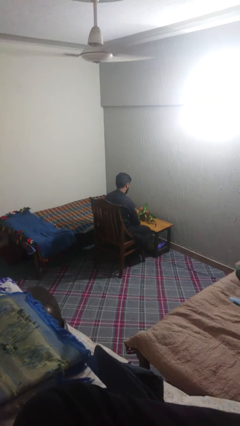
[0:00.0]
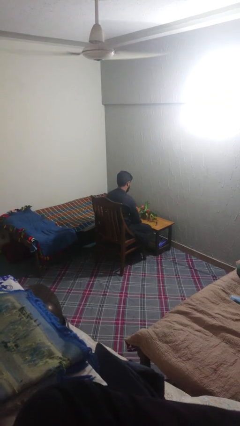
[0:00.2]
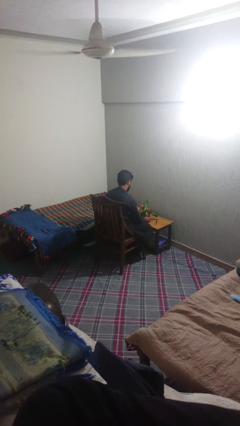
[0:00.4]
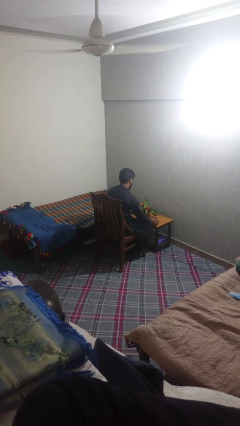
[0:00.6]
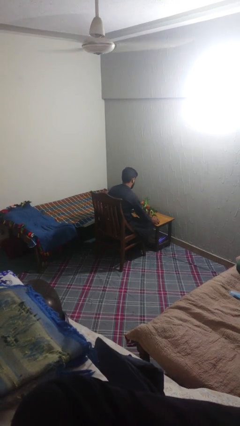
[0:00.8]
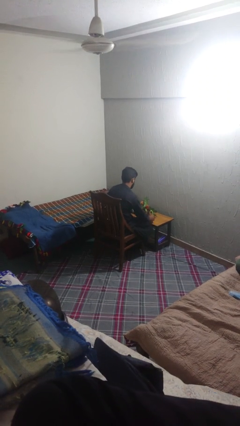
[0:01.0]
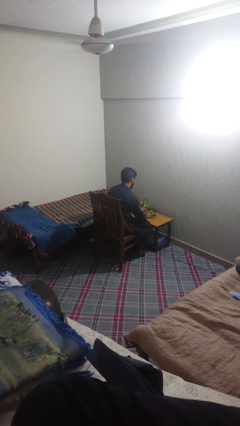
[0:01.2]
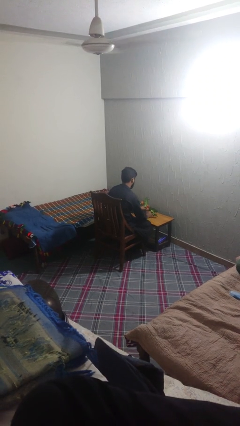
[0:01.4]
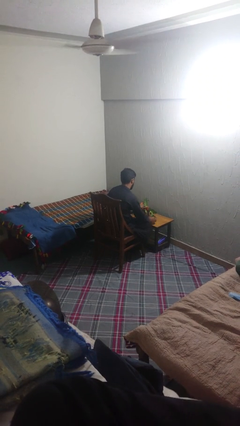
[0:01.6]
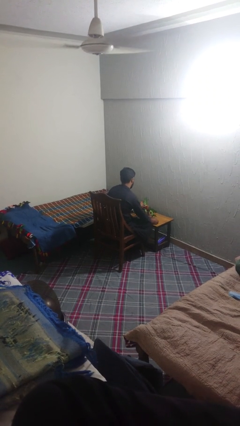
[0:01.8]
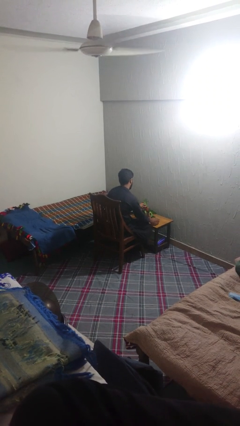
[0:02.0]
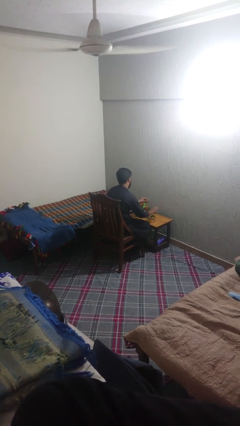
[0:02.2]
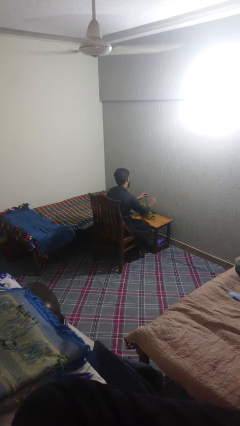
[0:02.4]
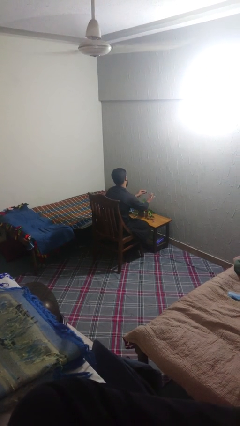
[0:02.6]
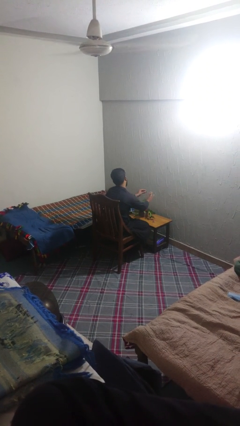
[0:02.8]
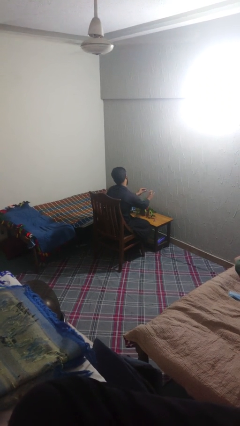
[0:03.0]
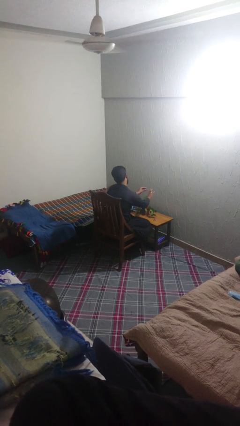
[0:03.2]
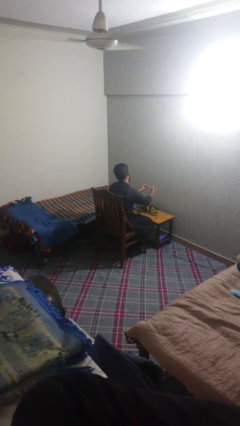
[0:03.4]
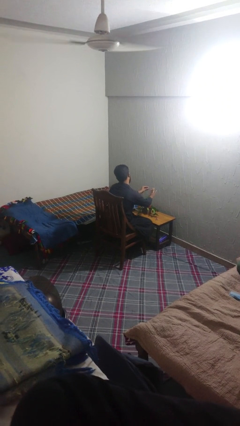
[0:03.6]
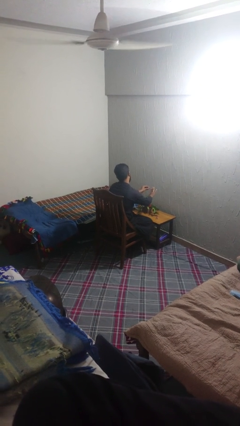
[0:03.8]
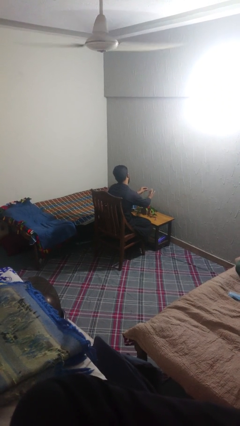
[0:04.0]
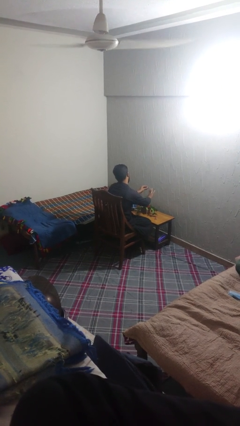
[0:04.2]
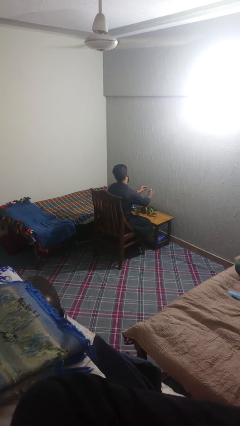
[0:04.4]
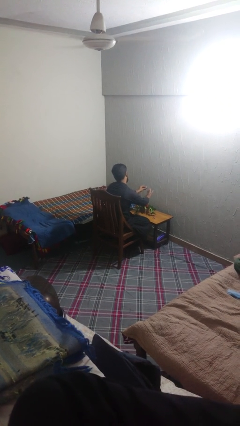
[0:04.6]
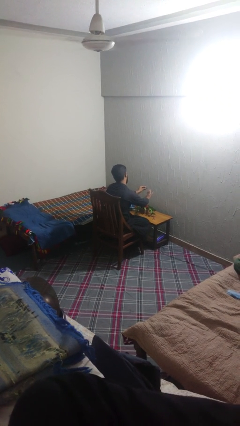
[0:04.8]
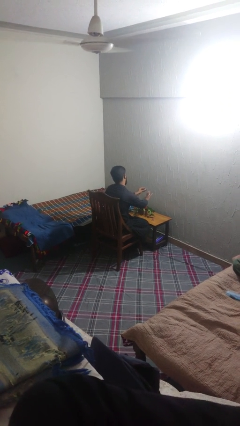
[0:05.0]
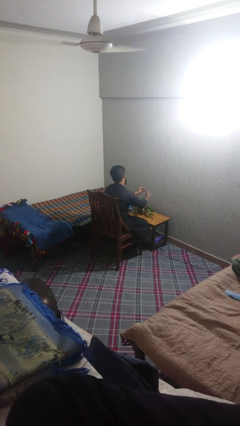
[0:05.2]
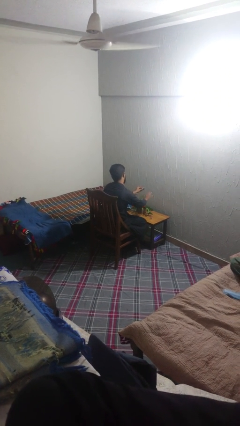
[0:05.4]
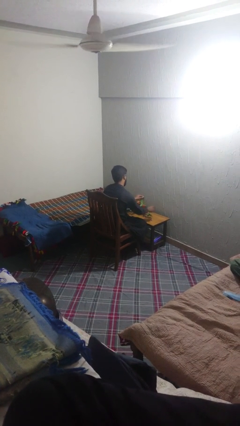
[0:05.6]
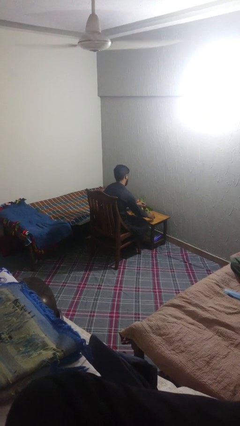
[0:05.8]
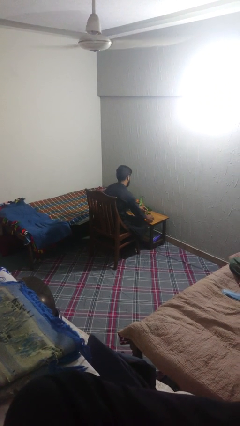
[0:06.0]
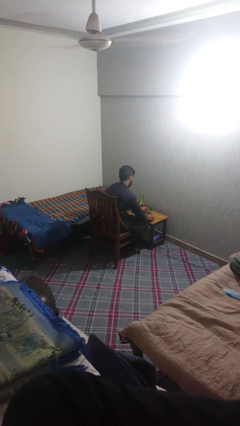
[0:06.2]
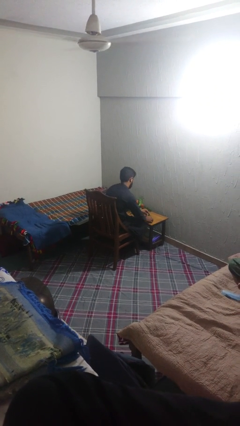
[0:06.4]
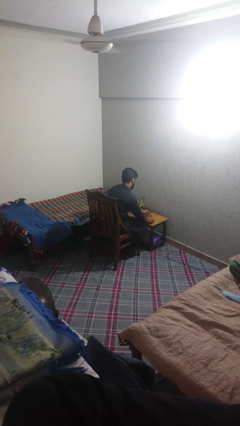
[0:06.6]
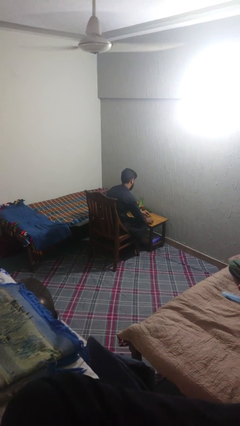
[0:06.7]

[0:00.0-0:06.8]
person paints fingernails

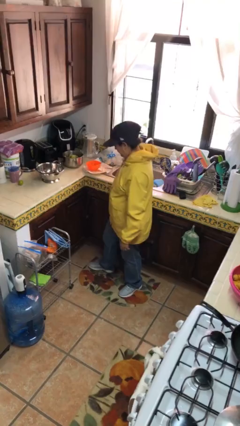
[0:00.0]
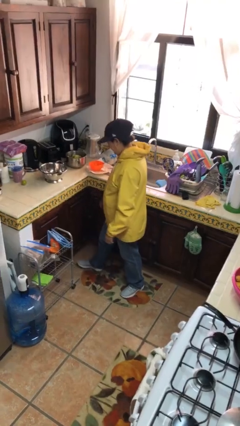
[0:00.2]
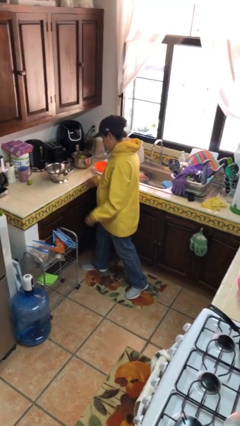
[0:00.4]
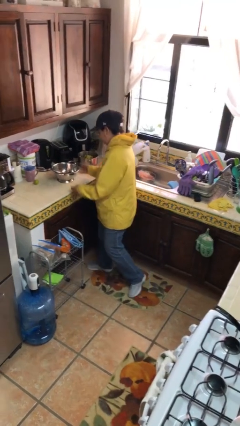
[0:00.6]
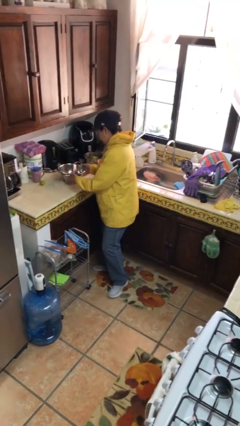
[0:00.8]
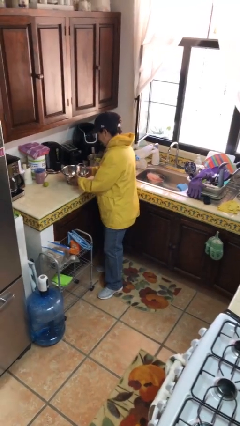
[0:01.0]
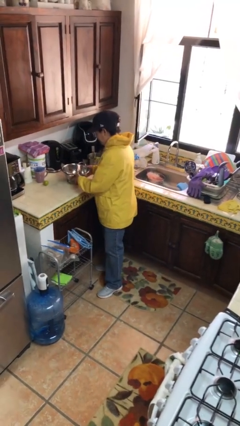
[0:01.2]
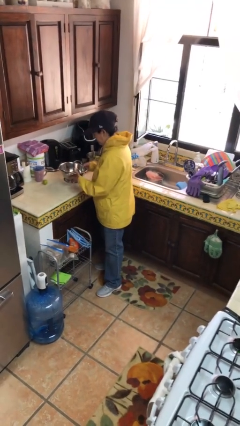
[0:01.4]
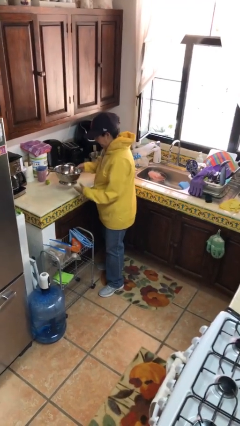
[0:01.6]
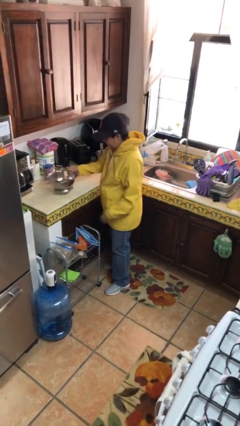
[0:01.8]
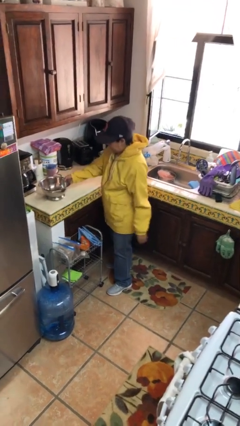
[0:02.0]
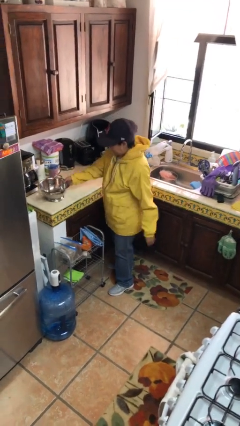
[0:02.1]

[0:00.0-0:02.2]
person picks up object from countertop

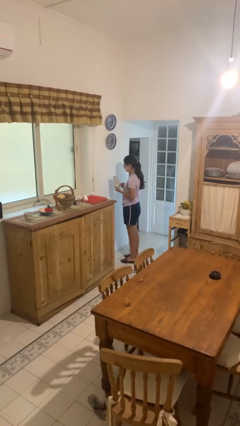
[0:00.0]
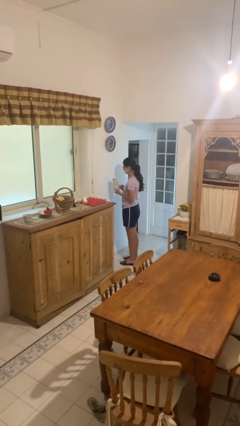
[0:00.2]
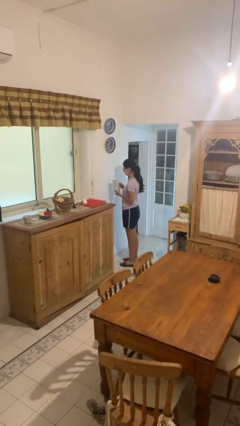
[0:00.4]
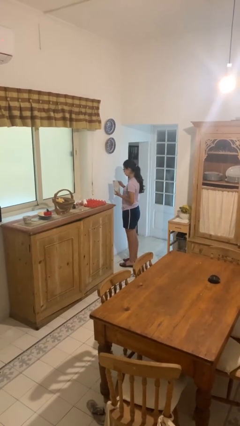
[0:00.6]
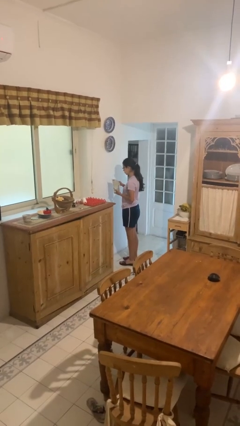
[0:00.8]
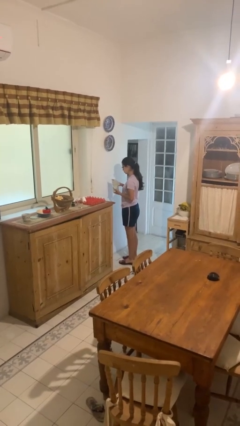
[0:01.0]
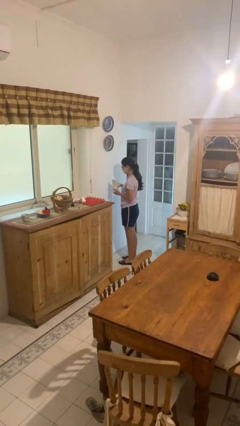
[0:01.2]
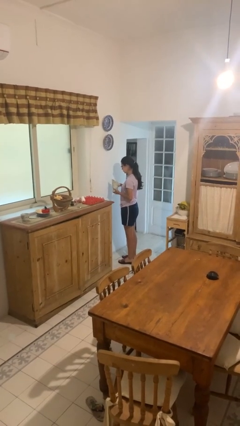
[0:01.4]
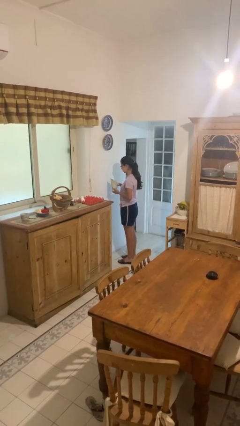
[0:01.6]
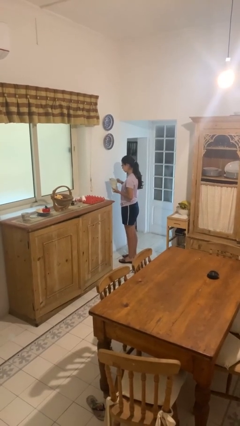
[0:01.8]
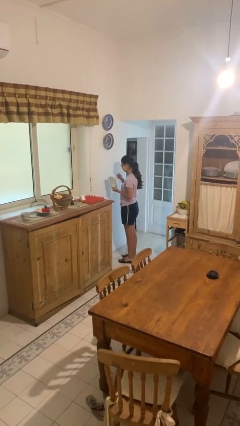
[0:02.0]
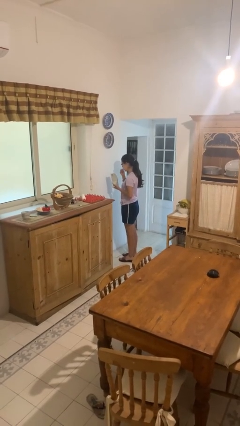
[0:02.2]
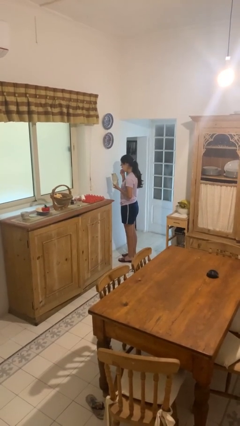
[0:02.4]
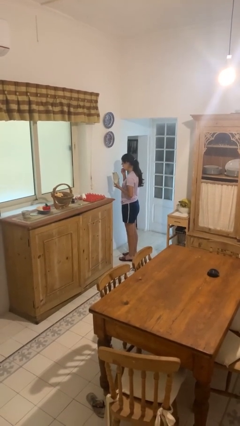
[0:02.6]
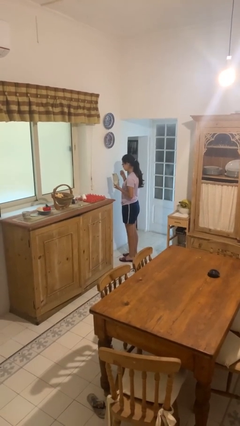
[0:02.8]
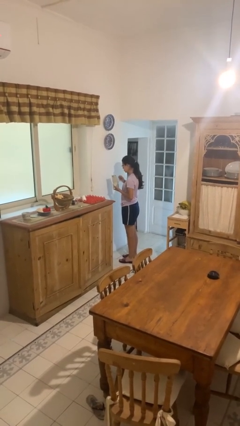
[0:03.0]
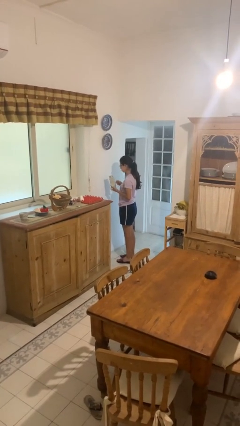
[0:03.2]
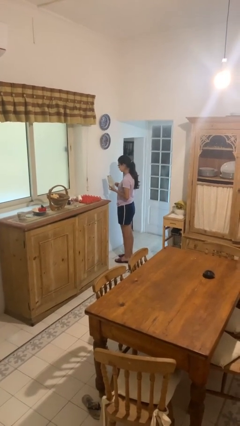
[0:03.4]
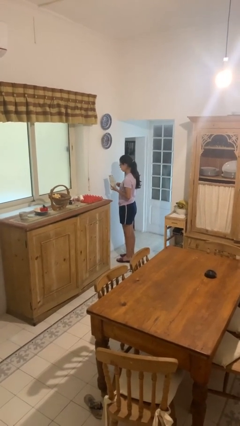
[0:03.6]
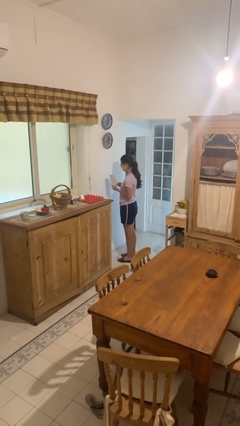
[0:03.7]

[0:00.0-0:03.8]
person eats snack from bag

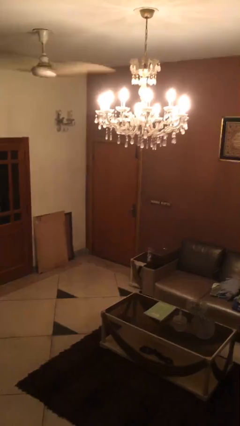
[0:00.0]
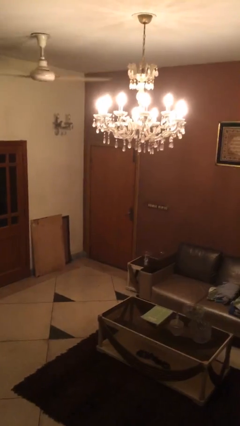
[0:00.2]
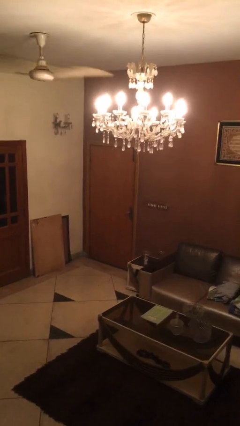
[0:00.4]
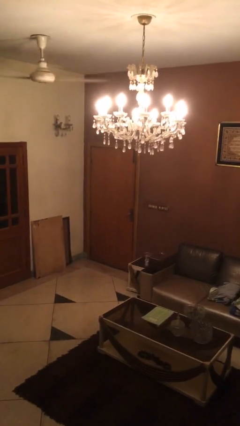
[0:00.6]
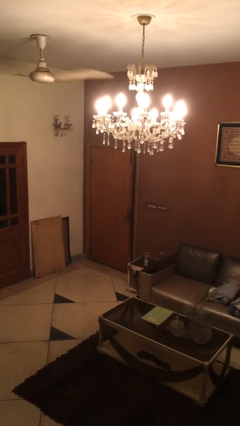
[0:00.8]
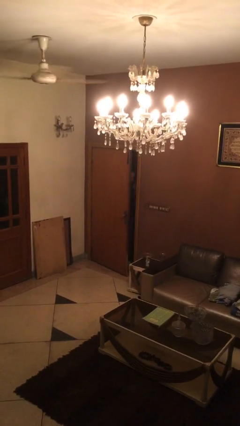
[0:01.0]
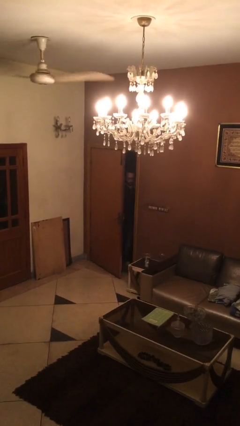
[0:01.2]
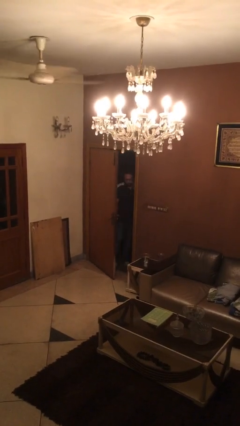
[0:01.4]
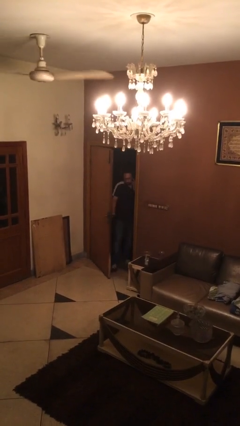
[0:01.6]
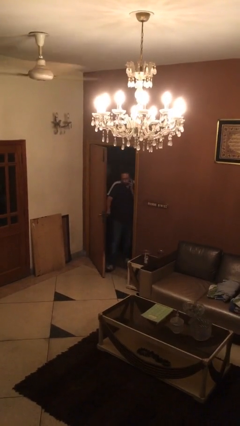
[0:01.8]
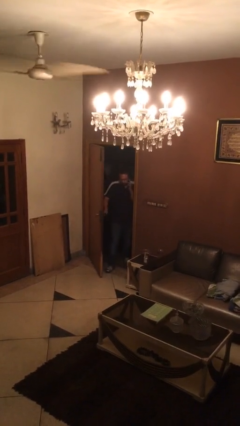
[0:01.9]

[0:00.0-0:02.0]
person opens facility door

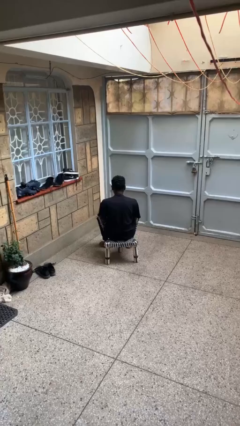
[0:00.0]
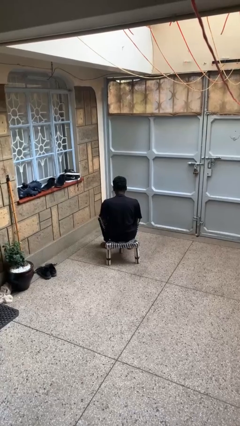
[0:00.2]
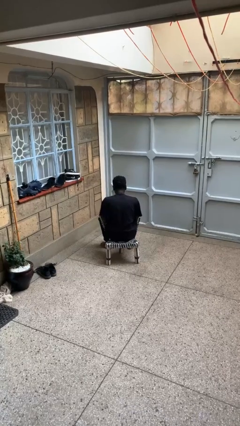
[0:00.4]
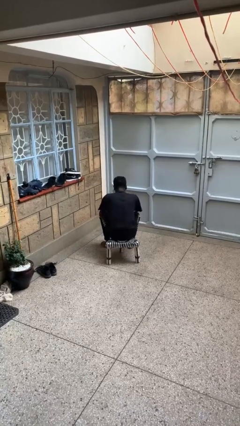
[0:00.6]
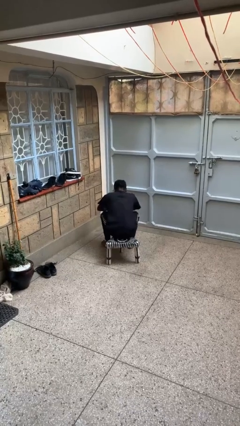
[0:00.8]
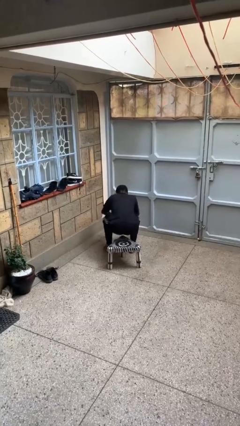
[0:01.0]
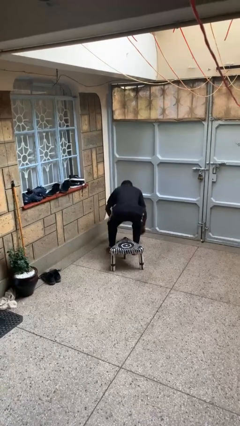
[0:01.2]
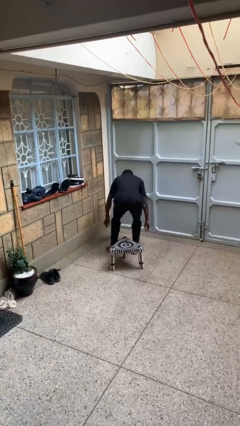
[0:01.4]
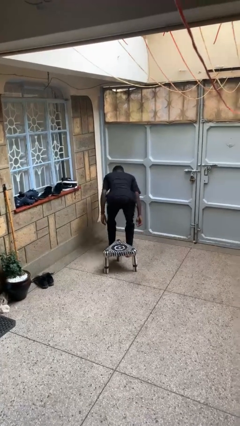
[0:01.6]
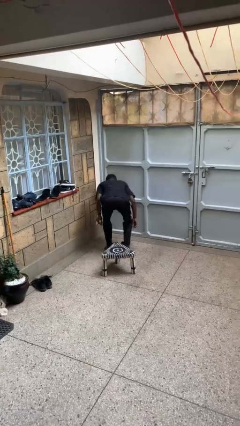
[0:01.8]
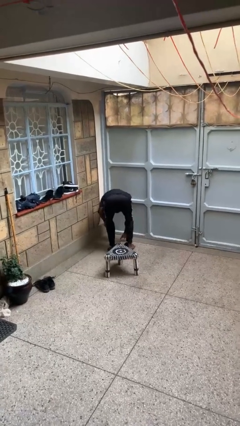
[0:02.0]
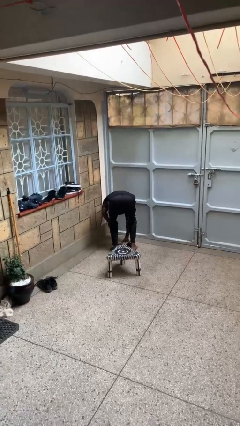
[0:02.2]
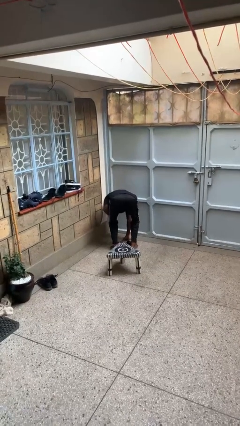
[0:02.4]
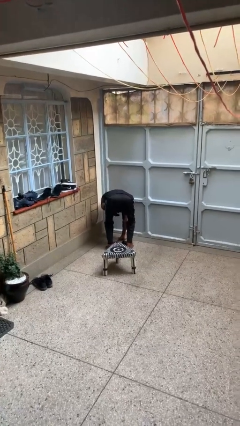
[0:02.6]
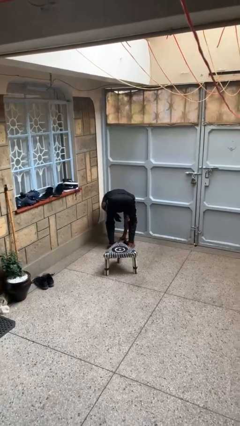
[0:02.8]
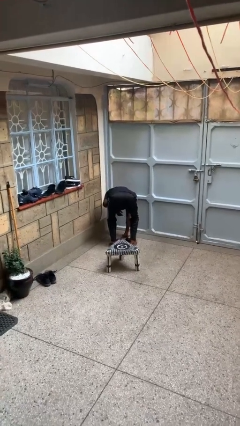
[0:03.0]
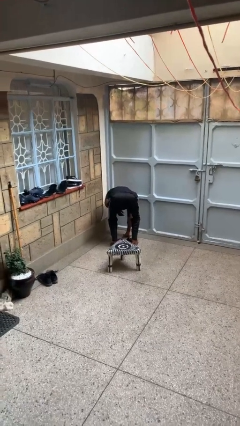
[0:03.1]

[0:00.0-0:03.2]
person falls from chair

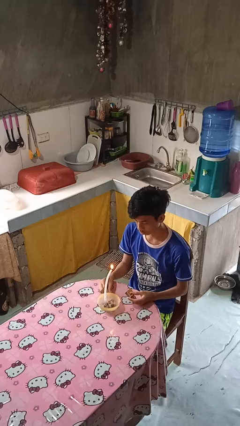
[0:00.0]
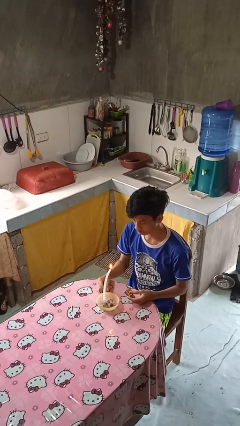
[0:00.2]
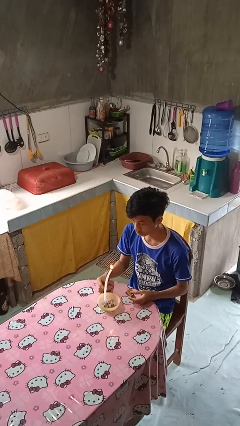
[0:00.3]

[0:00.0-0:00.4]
person extinguishes candle
